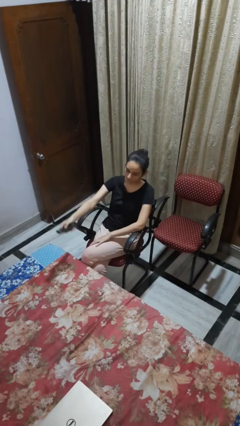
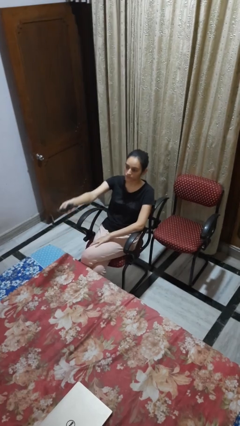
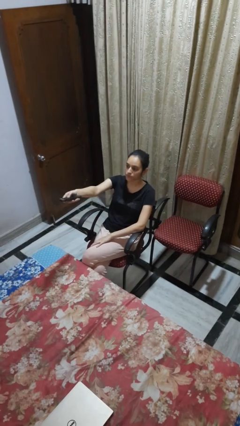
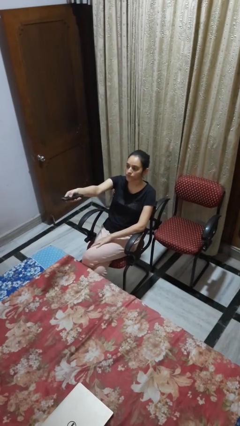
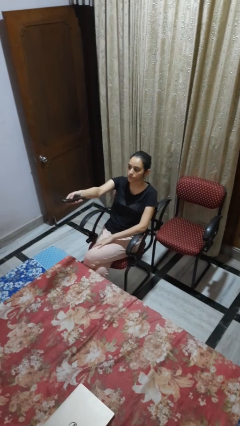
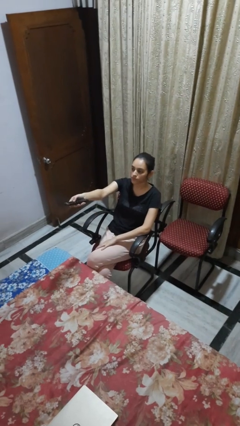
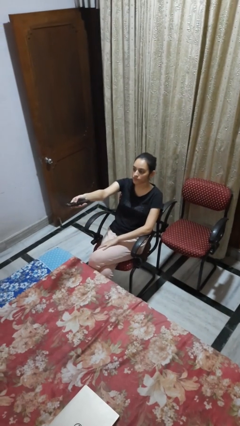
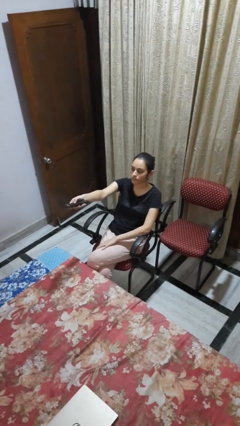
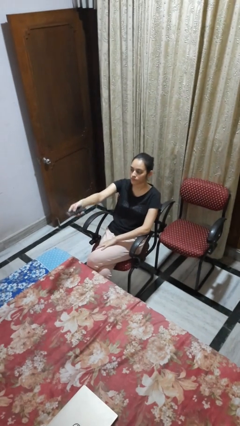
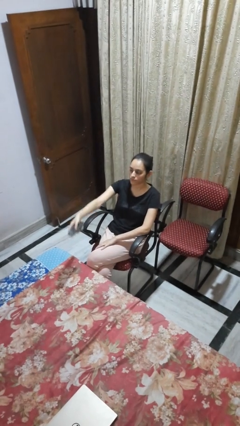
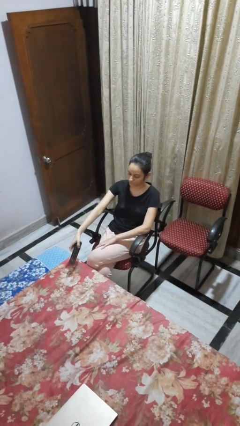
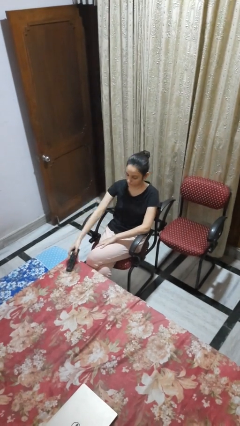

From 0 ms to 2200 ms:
person uses television remote

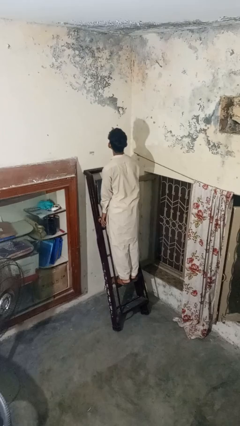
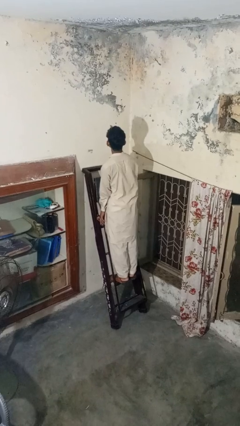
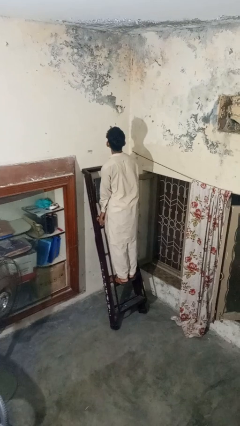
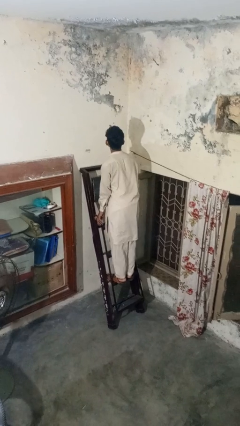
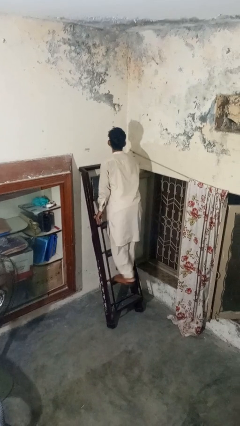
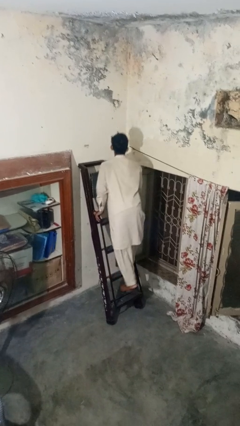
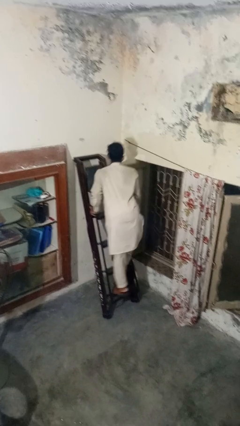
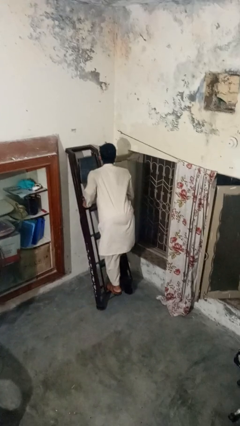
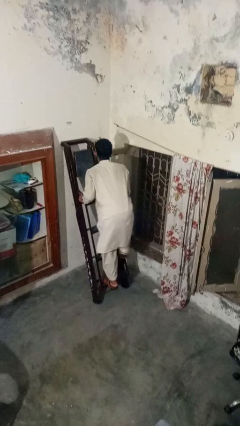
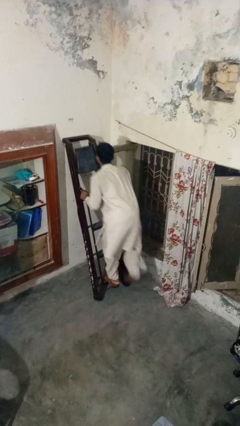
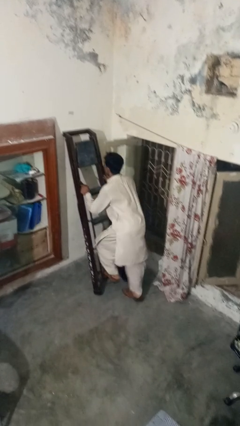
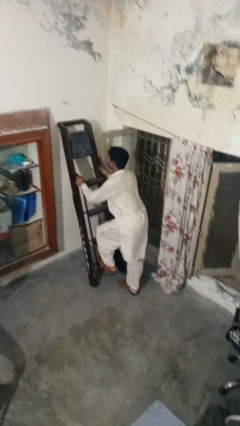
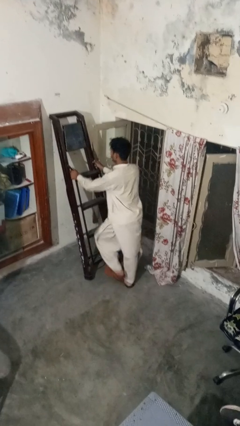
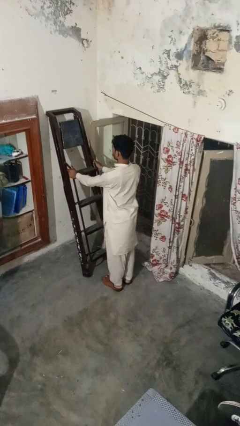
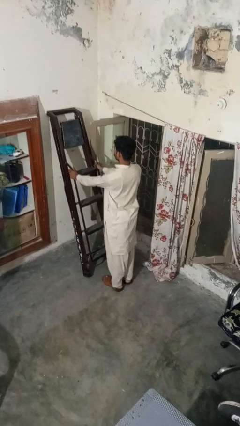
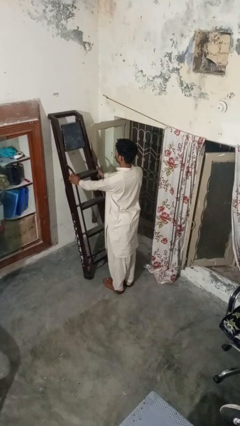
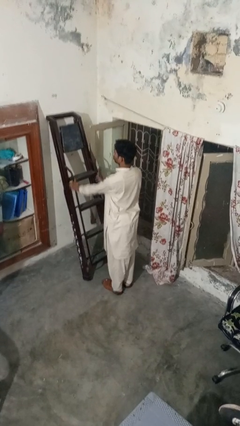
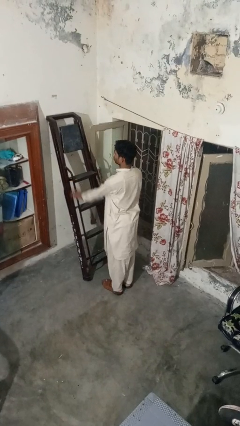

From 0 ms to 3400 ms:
person climbs down ladder

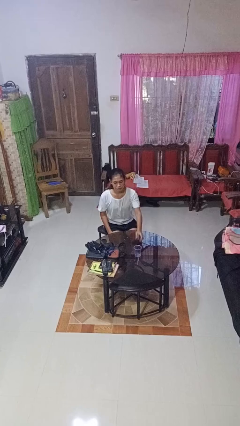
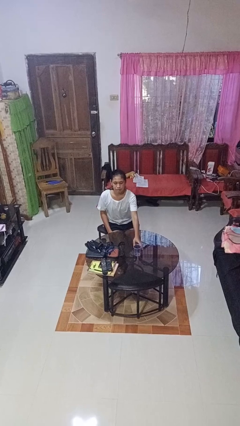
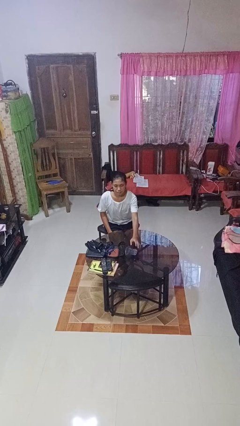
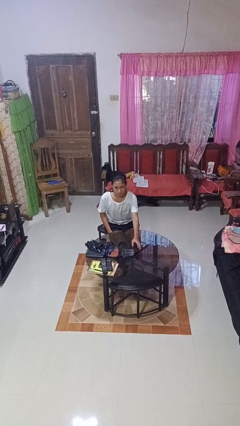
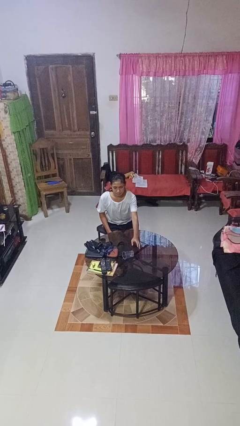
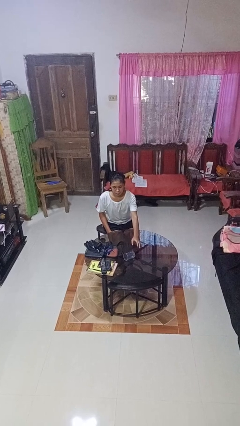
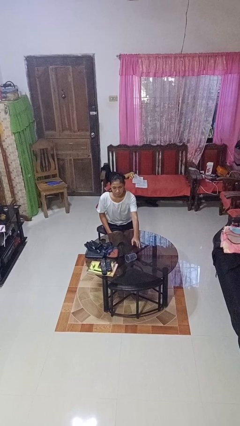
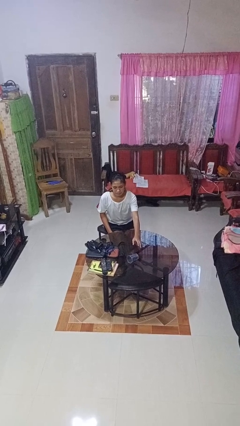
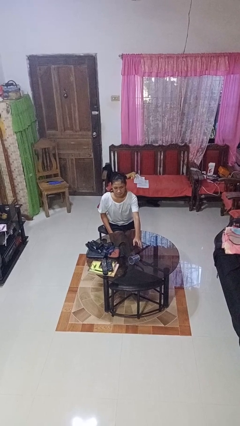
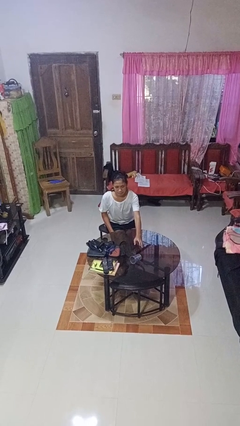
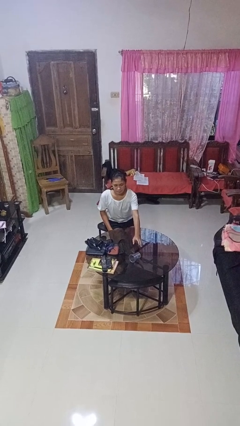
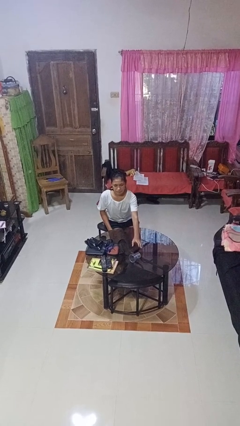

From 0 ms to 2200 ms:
person knocks over glass

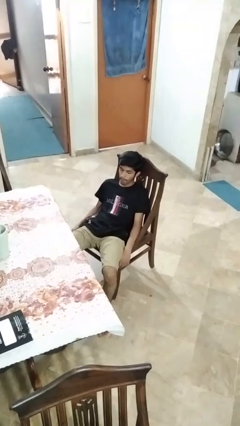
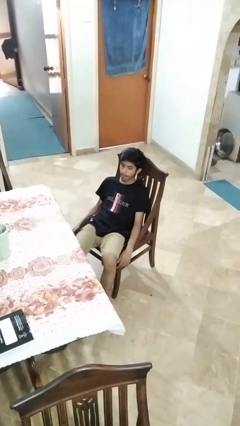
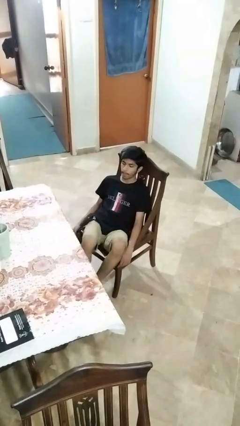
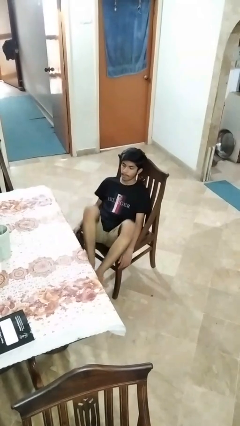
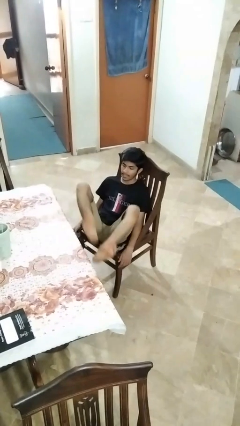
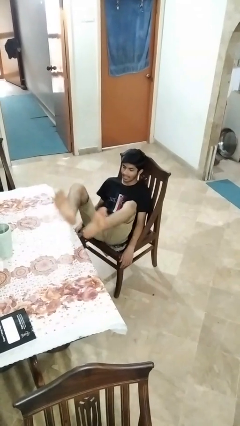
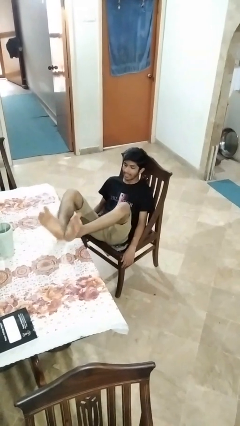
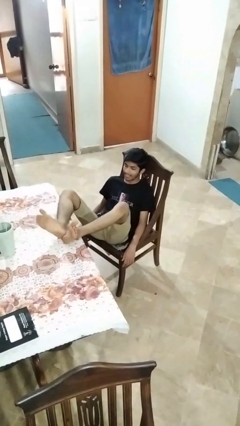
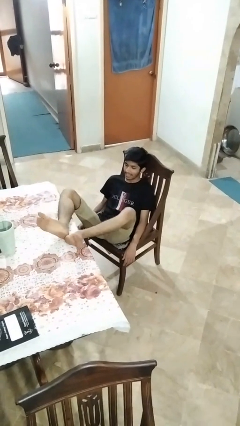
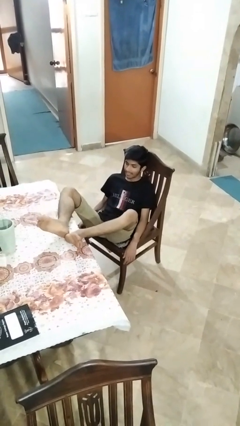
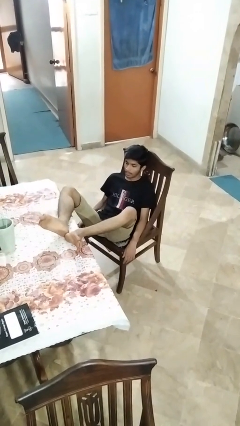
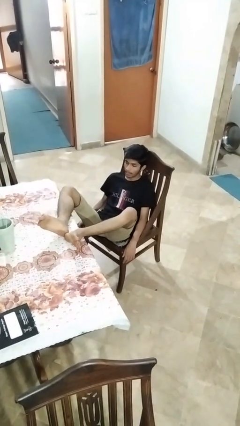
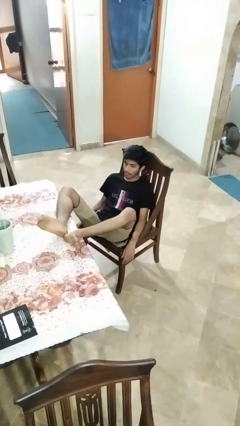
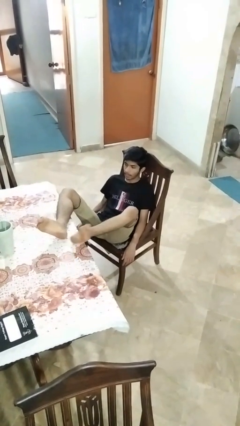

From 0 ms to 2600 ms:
person puts feet up

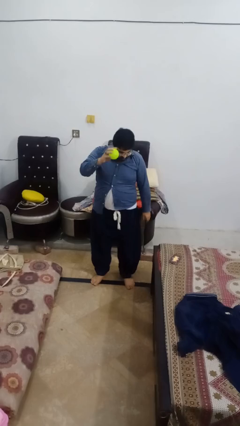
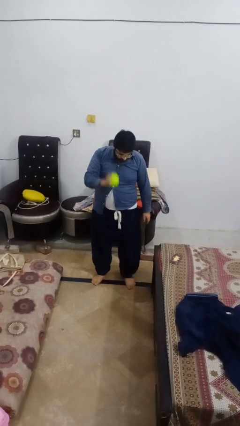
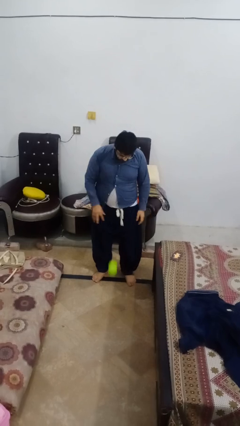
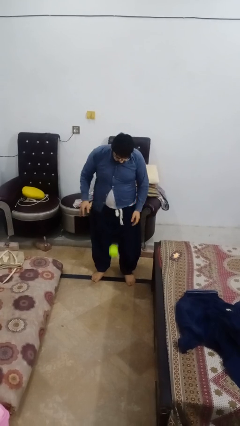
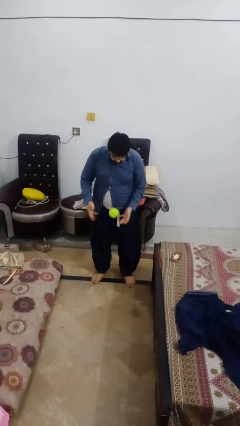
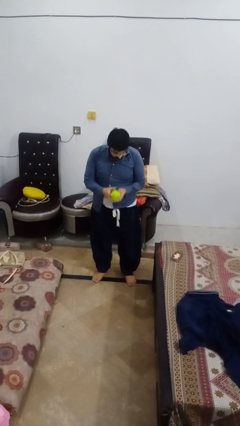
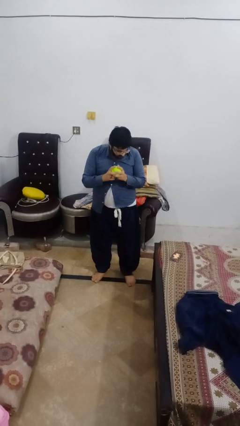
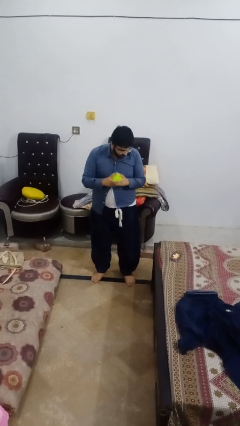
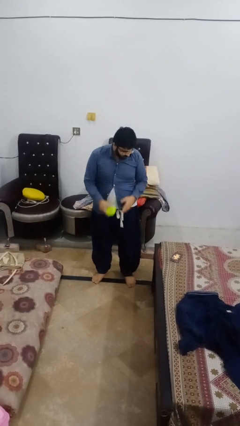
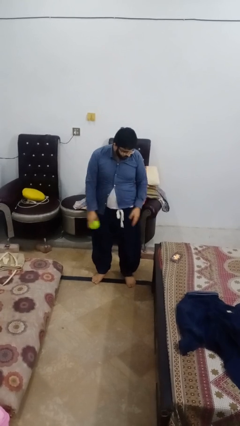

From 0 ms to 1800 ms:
person bounces ball on floor

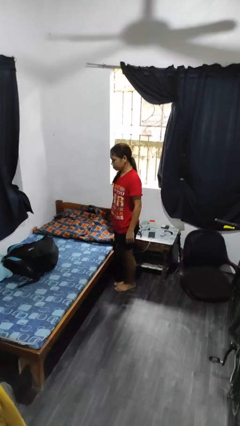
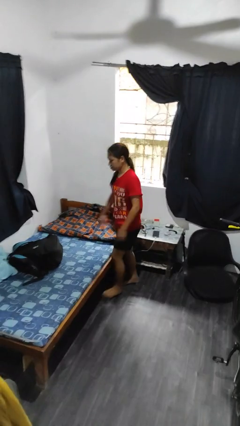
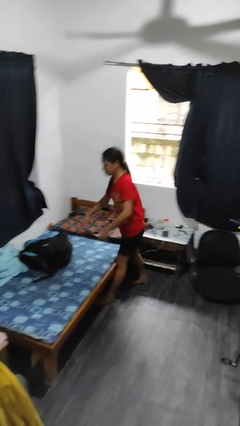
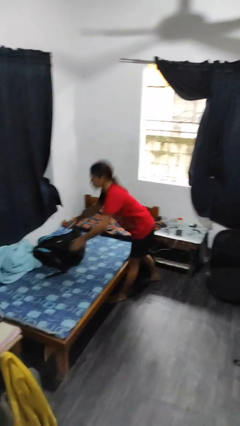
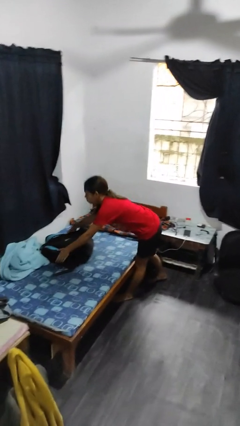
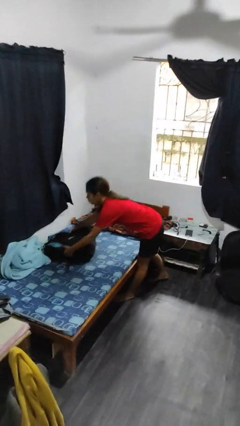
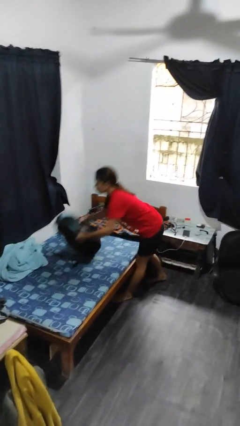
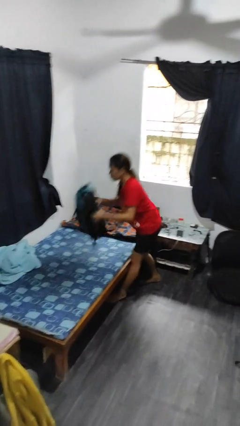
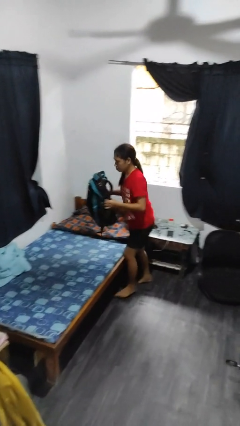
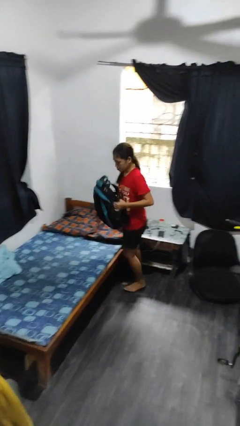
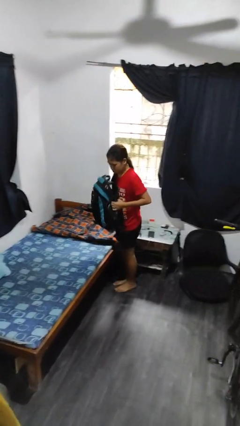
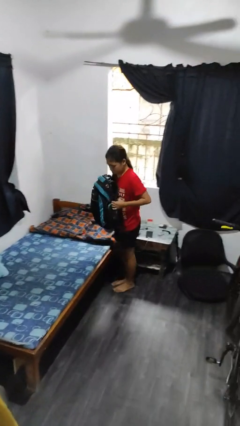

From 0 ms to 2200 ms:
person picks up object from bed

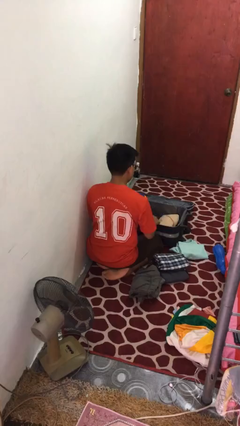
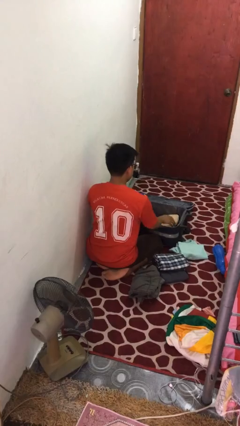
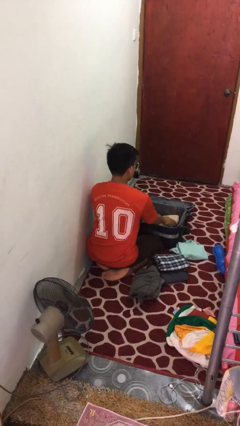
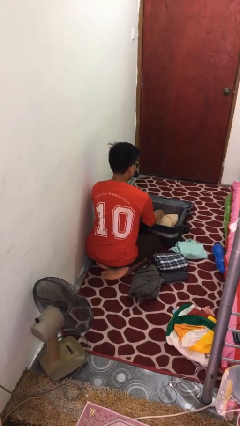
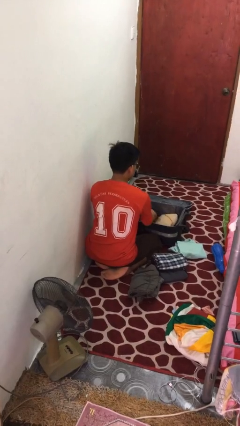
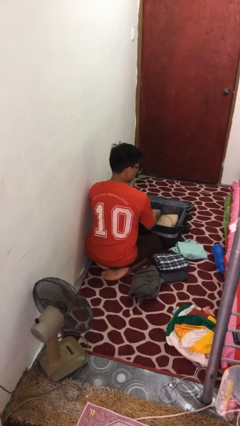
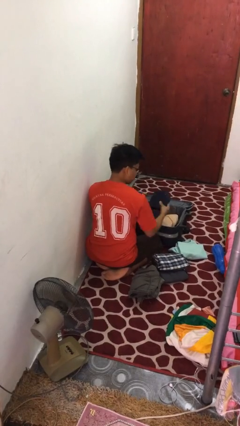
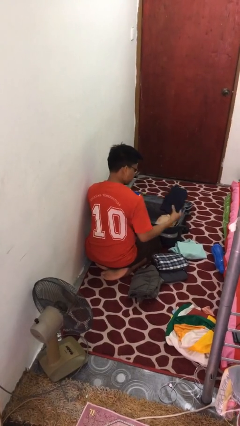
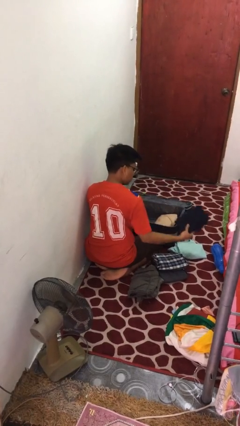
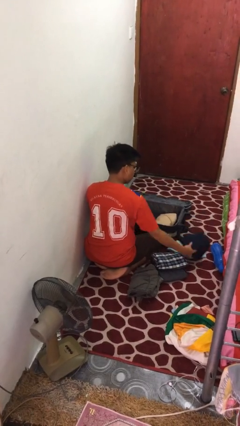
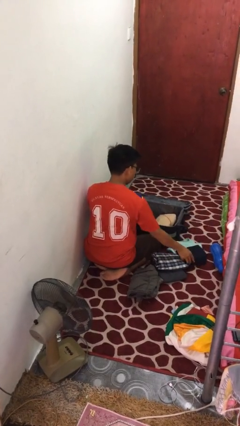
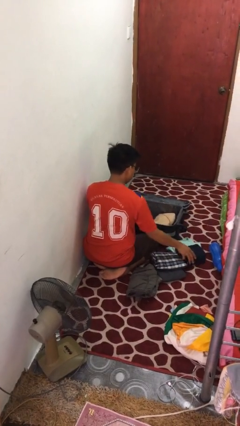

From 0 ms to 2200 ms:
person unloads clothes from suitcase

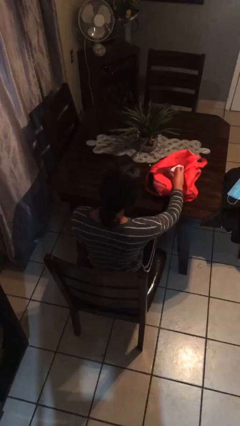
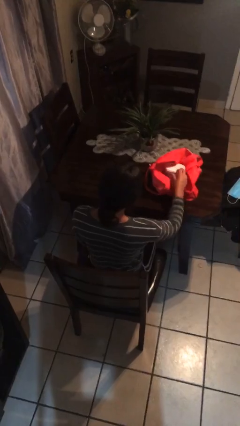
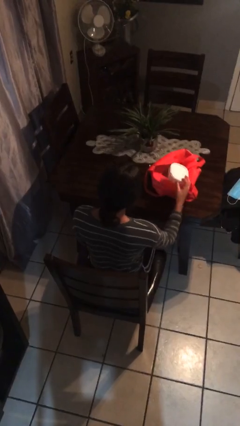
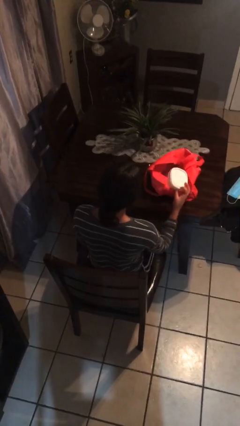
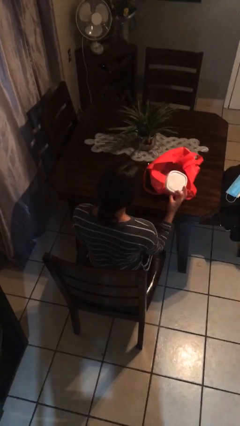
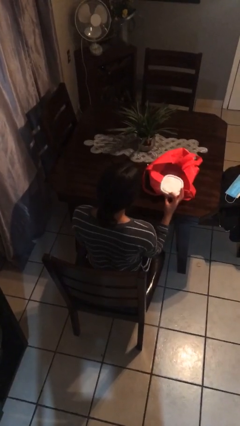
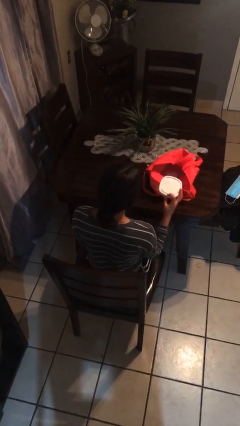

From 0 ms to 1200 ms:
person takes object from bag
